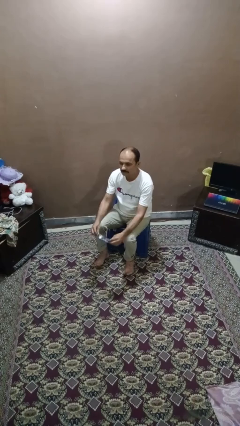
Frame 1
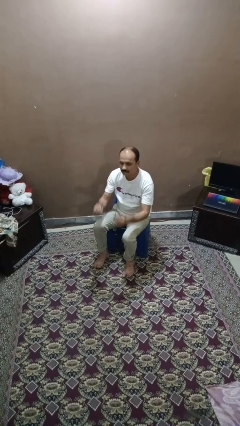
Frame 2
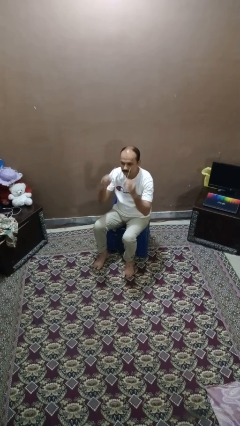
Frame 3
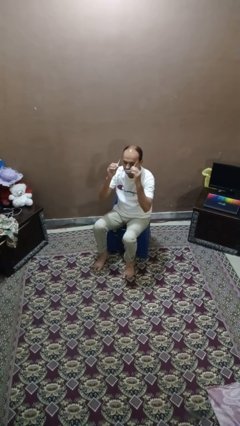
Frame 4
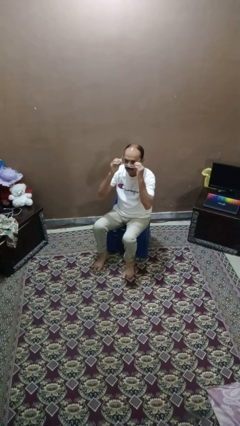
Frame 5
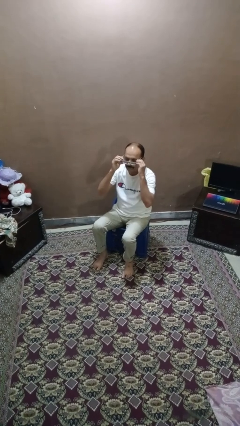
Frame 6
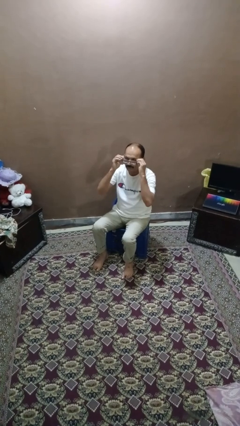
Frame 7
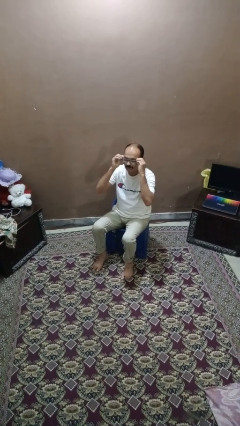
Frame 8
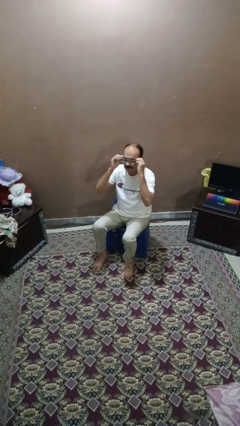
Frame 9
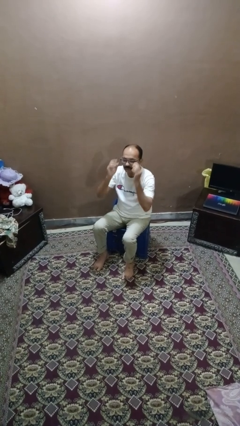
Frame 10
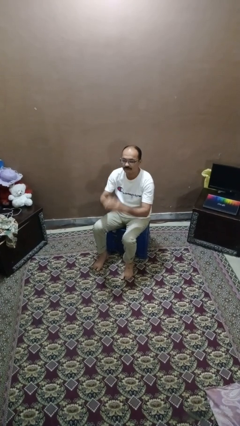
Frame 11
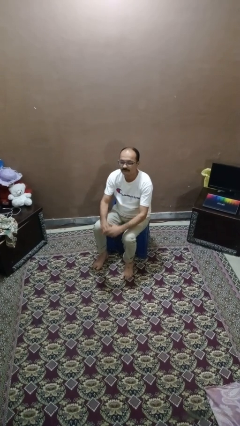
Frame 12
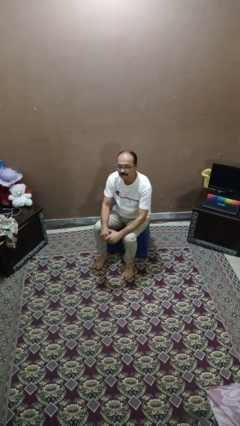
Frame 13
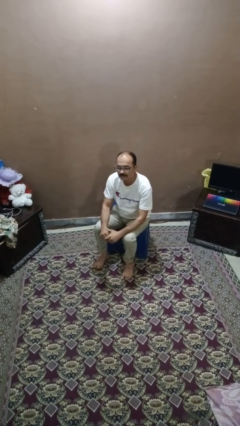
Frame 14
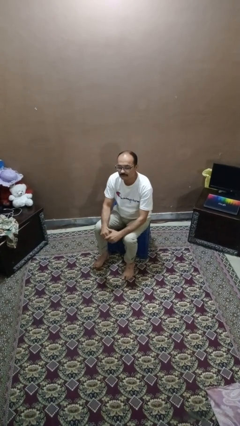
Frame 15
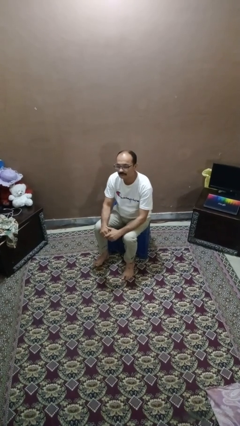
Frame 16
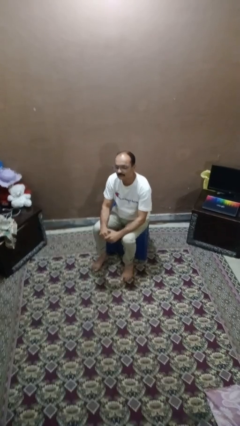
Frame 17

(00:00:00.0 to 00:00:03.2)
person puts on glasses

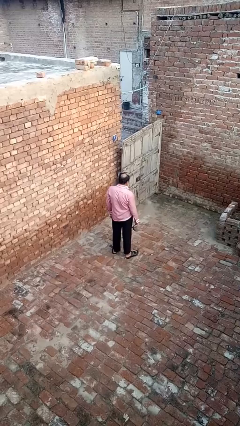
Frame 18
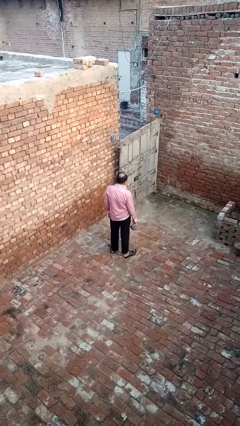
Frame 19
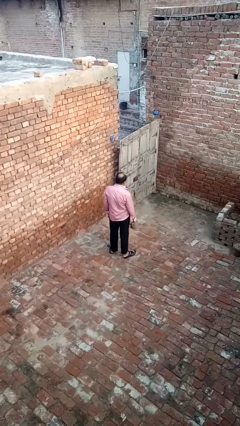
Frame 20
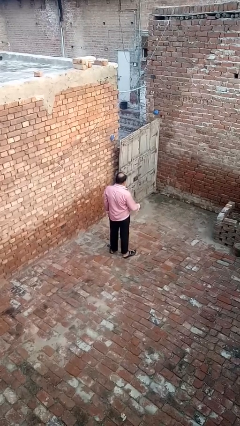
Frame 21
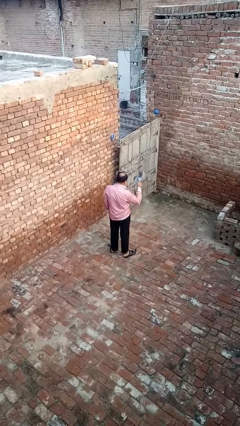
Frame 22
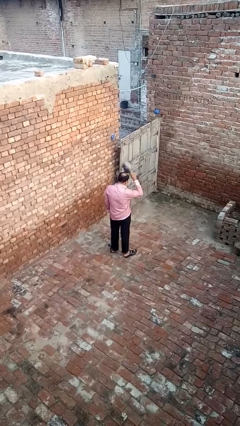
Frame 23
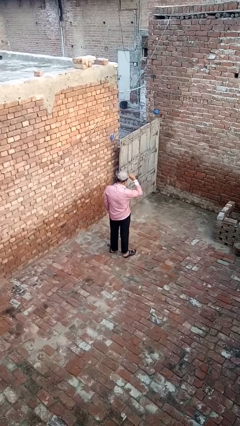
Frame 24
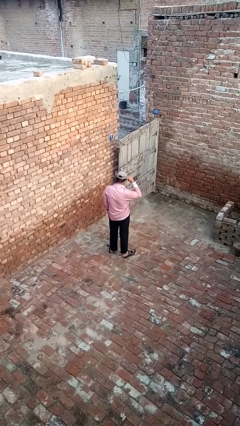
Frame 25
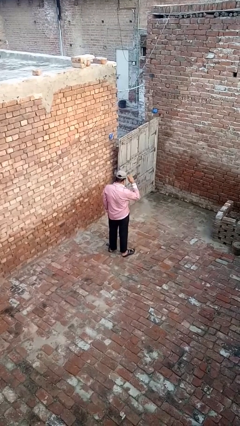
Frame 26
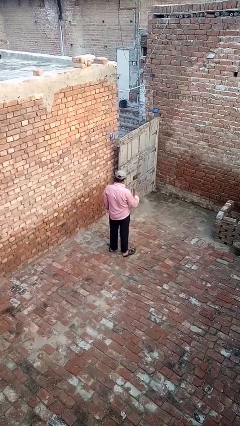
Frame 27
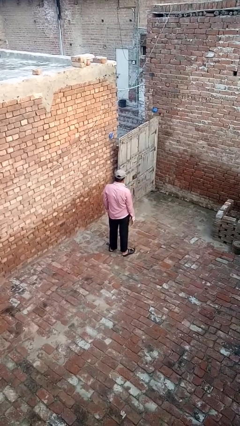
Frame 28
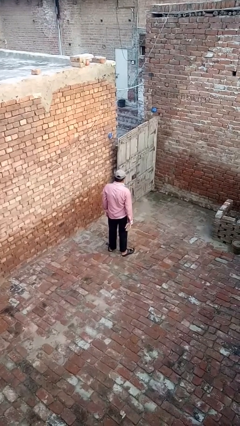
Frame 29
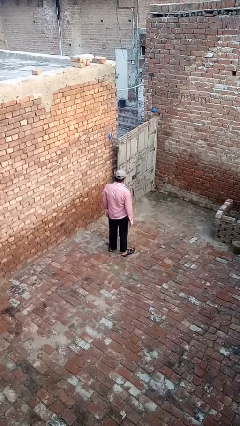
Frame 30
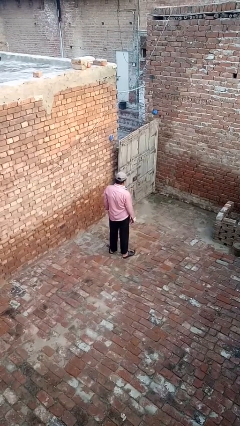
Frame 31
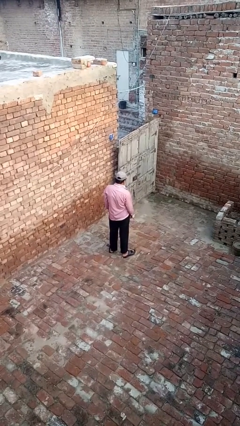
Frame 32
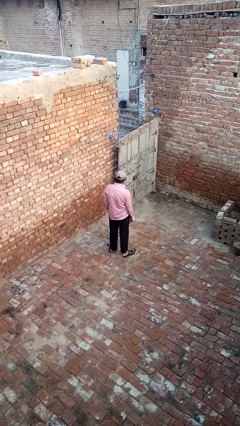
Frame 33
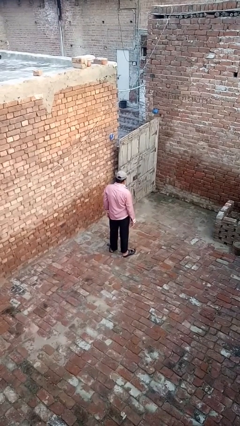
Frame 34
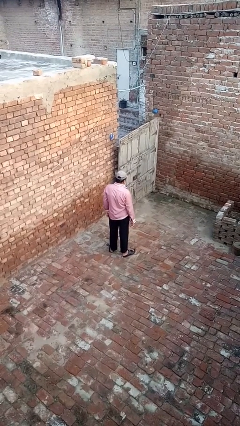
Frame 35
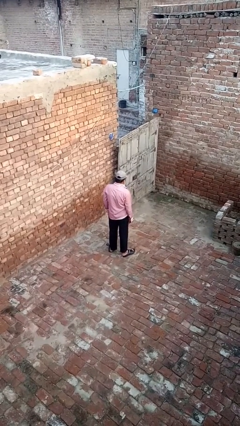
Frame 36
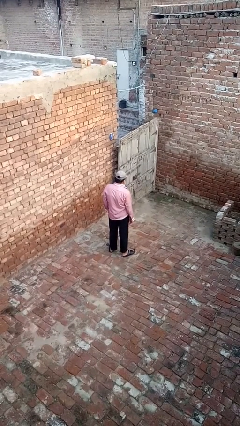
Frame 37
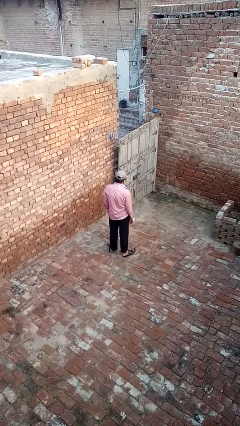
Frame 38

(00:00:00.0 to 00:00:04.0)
person puts on hat

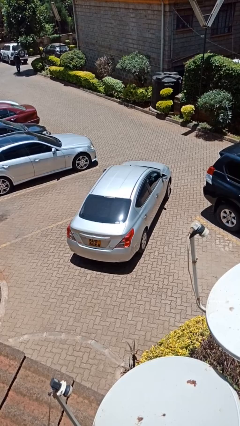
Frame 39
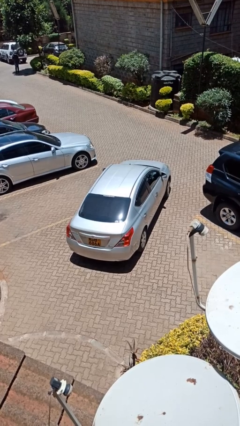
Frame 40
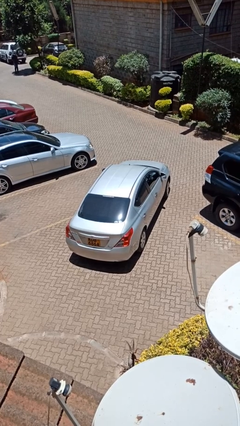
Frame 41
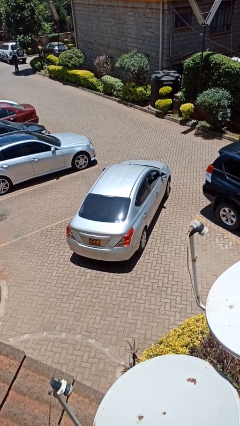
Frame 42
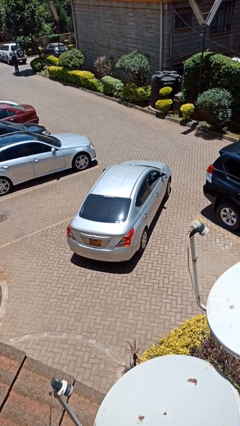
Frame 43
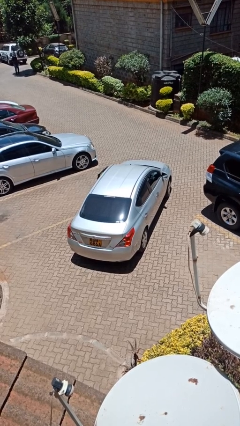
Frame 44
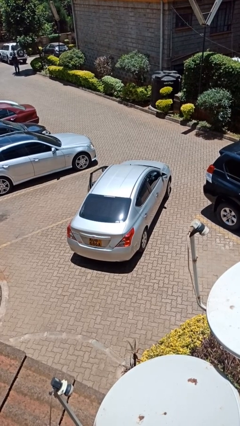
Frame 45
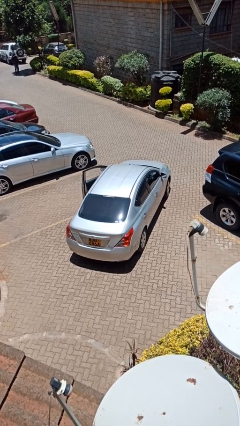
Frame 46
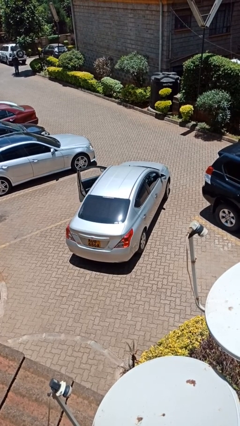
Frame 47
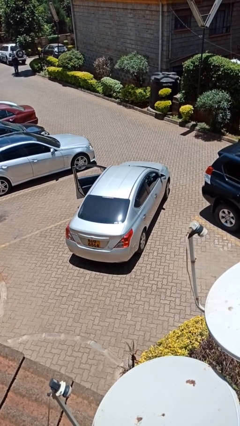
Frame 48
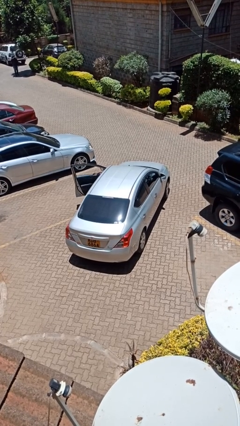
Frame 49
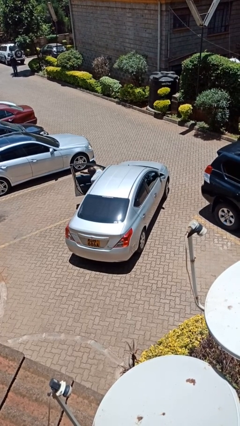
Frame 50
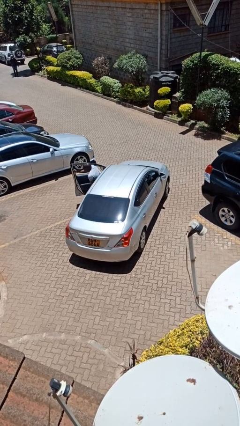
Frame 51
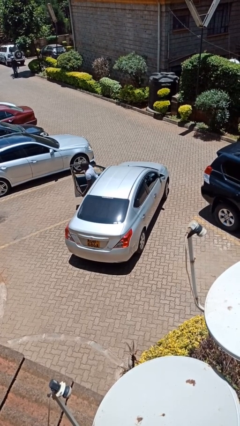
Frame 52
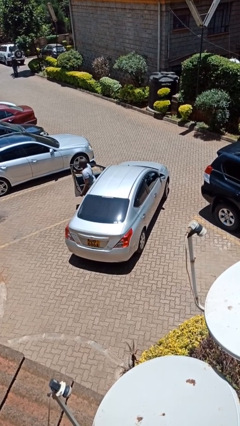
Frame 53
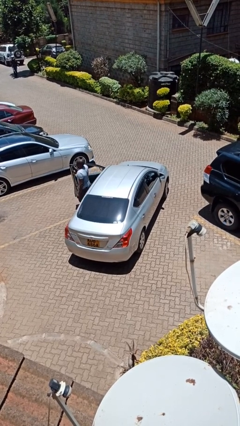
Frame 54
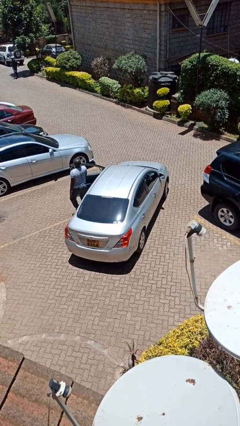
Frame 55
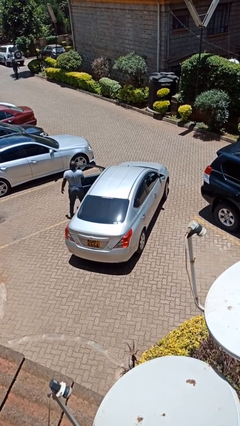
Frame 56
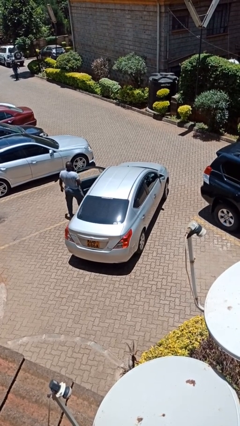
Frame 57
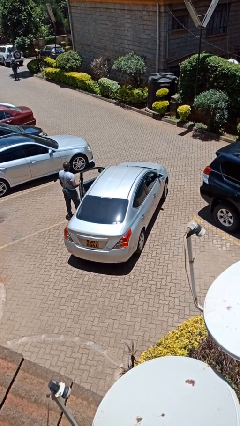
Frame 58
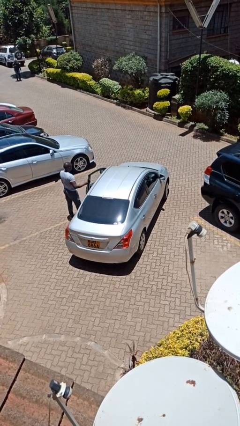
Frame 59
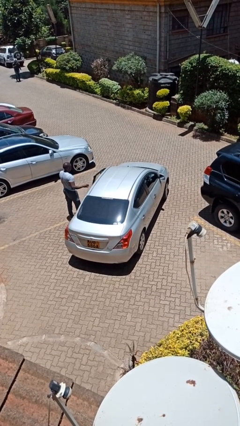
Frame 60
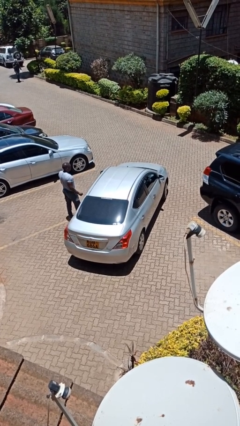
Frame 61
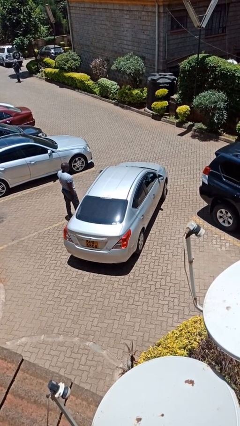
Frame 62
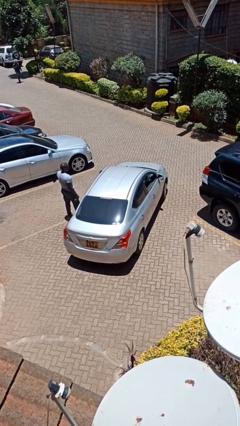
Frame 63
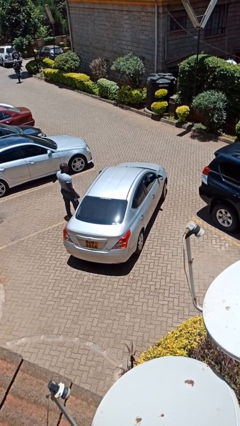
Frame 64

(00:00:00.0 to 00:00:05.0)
car drops off person

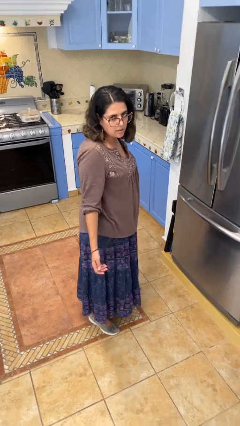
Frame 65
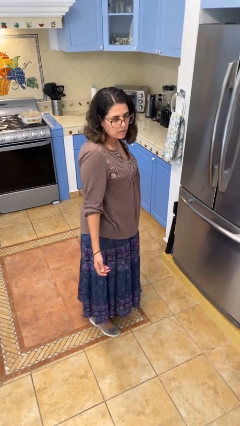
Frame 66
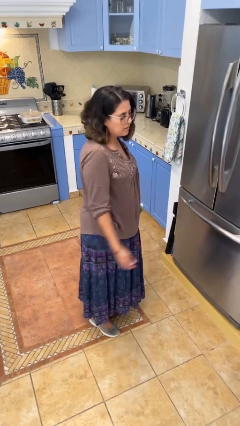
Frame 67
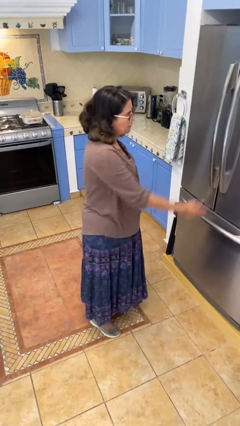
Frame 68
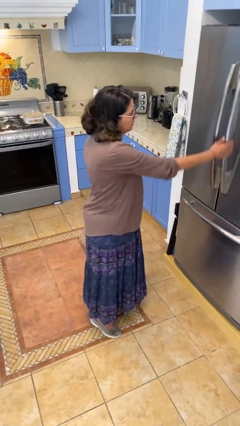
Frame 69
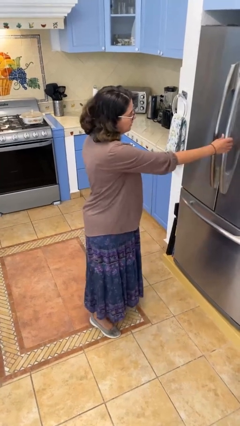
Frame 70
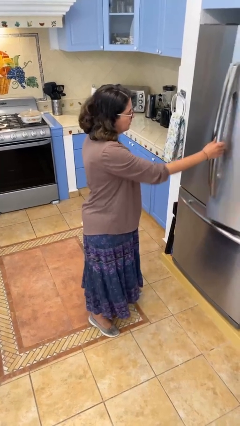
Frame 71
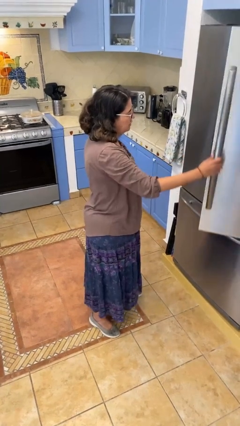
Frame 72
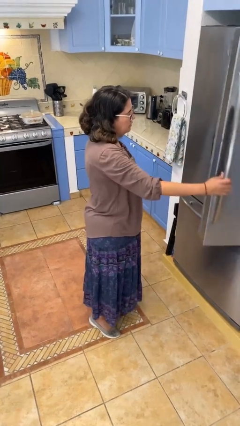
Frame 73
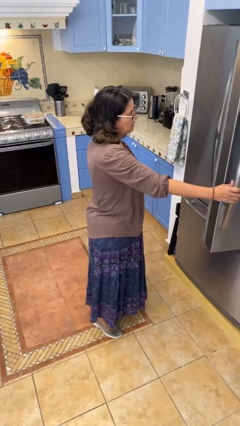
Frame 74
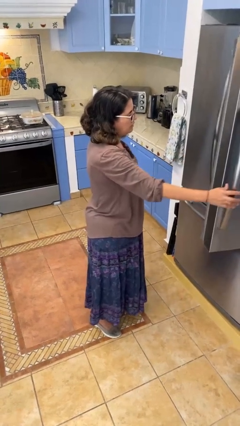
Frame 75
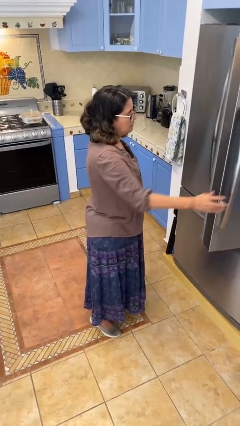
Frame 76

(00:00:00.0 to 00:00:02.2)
person opens refrigerator

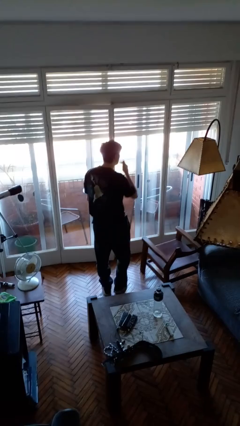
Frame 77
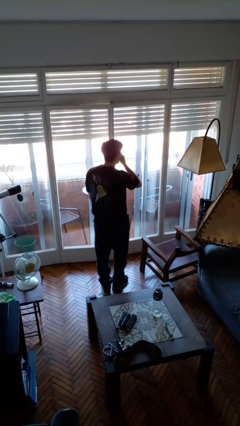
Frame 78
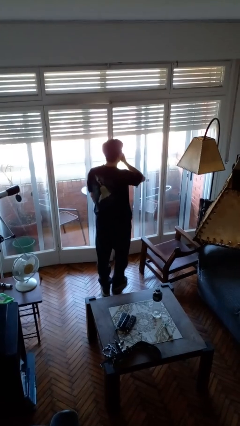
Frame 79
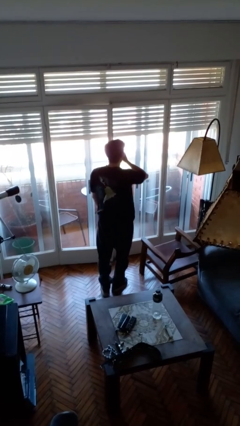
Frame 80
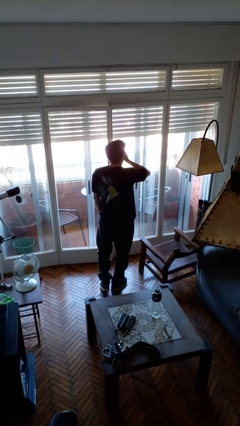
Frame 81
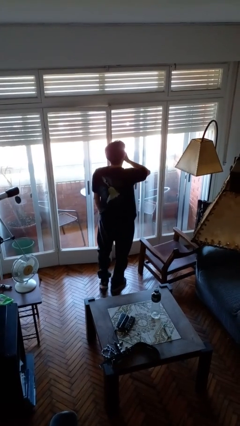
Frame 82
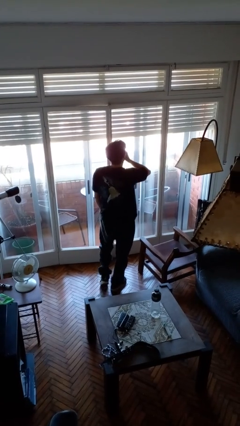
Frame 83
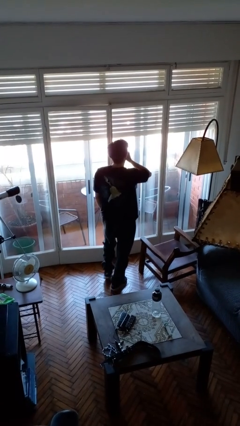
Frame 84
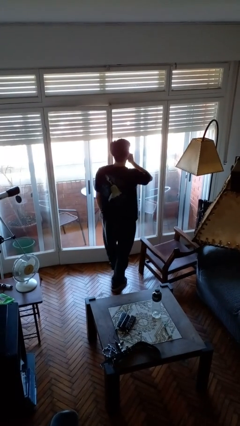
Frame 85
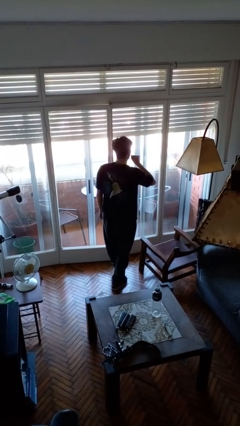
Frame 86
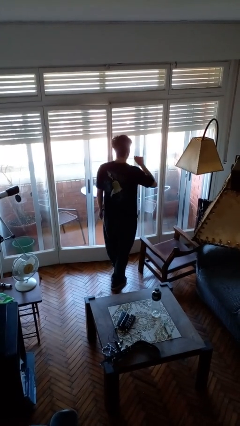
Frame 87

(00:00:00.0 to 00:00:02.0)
person yawns

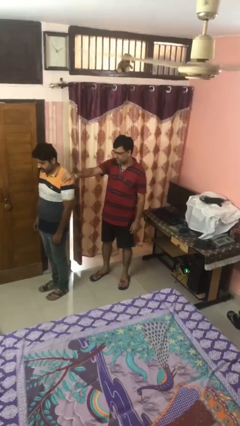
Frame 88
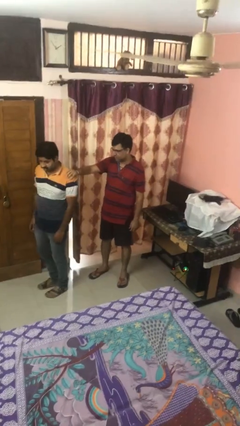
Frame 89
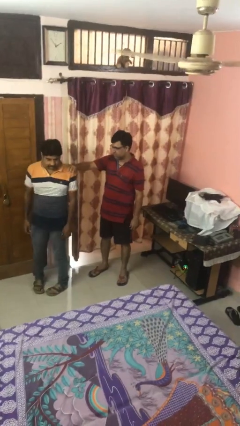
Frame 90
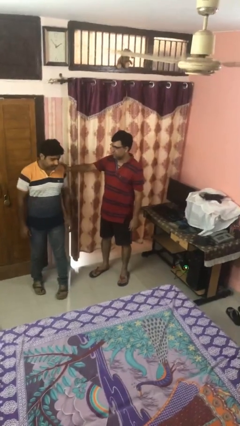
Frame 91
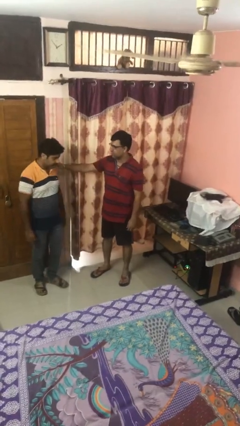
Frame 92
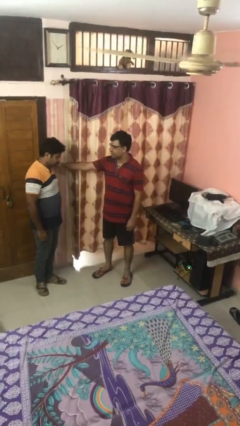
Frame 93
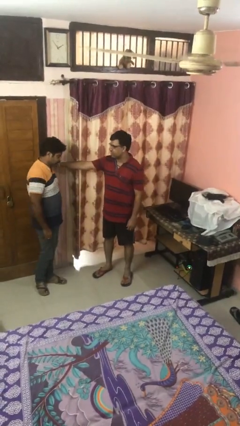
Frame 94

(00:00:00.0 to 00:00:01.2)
person spins person around
